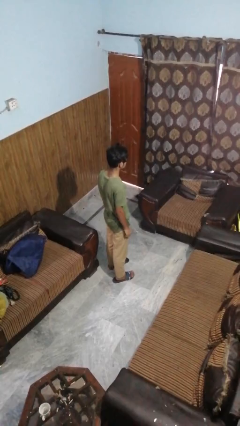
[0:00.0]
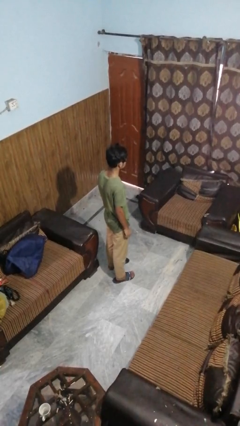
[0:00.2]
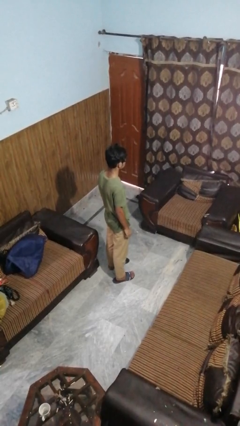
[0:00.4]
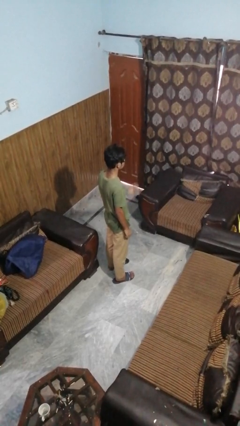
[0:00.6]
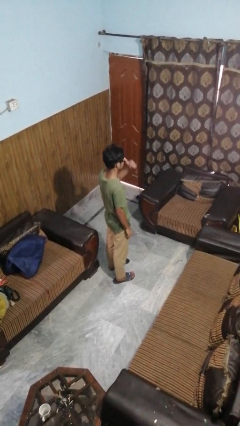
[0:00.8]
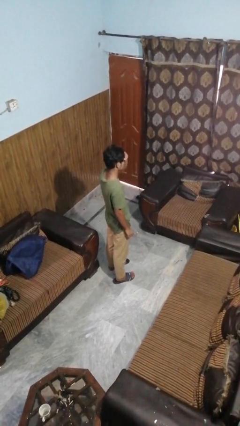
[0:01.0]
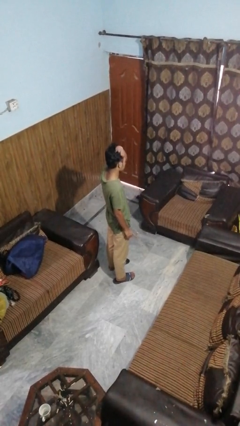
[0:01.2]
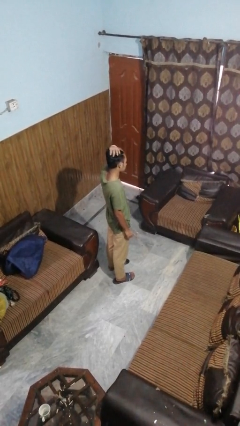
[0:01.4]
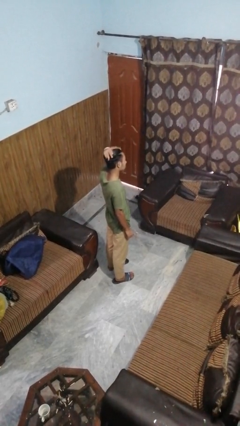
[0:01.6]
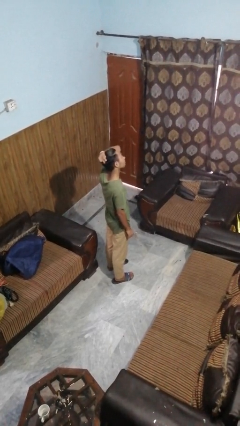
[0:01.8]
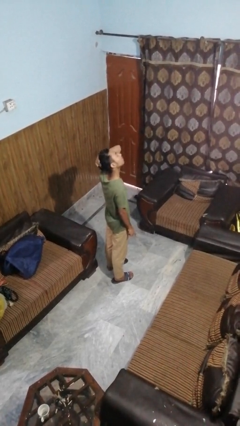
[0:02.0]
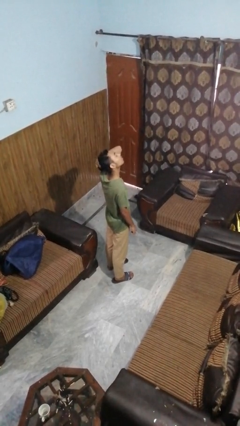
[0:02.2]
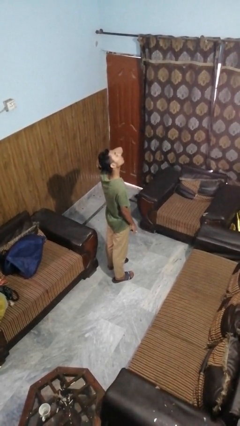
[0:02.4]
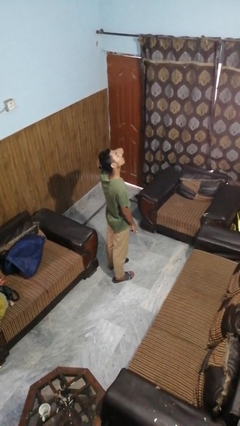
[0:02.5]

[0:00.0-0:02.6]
person strokes hair

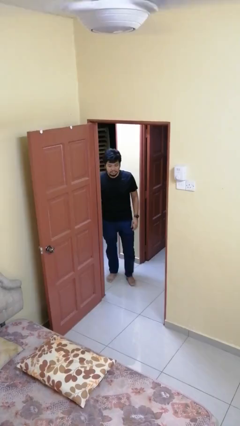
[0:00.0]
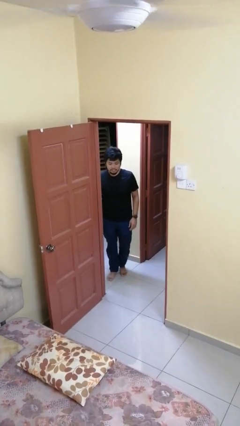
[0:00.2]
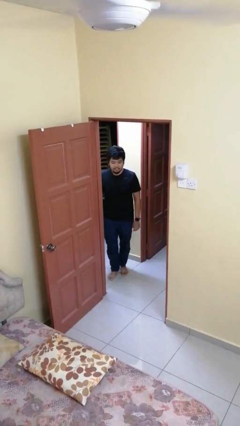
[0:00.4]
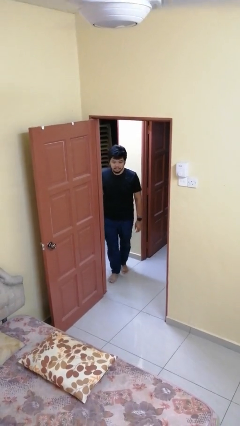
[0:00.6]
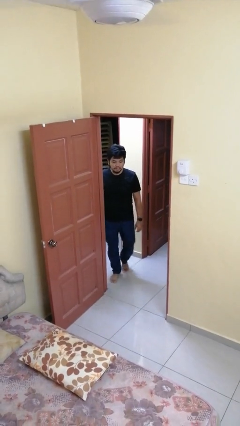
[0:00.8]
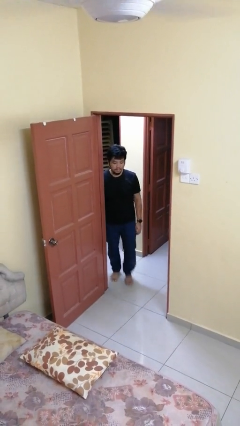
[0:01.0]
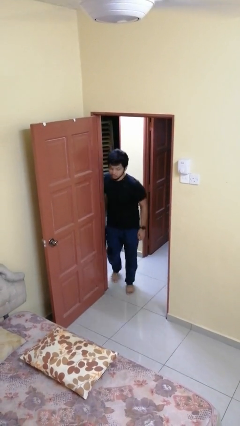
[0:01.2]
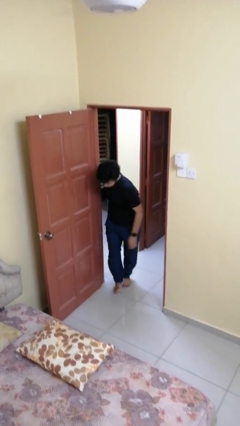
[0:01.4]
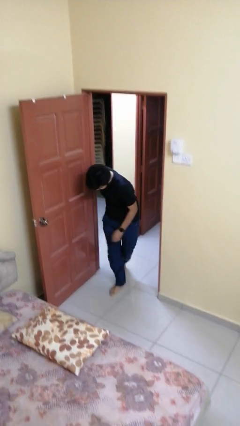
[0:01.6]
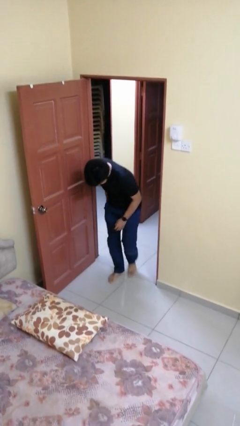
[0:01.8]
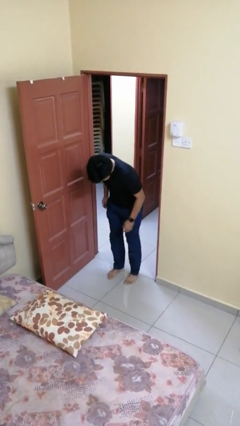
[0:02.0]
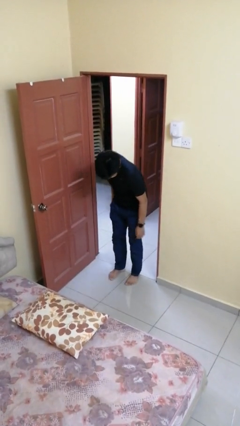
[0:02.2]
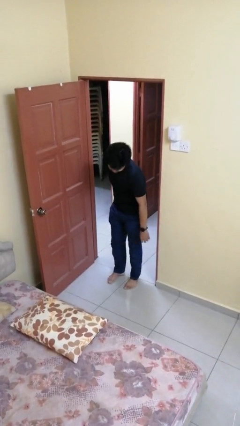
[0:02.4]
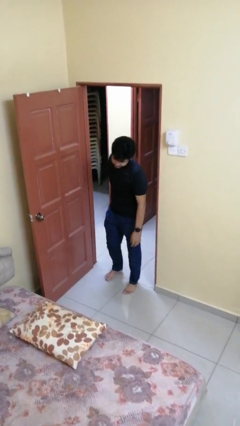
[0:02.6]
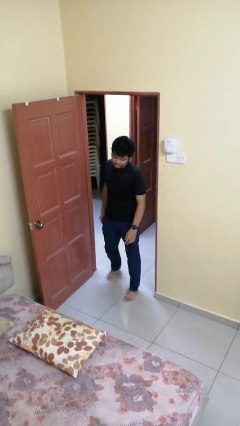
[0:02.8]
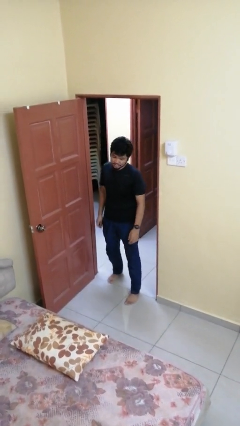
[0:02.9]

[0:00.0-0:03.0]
person bumps into wall

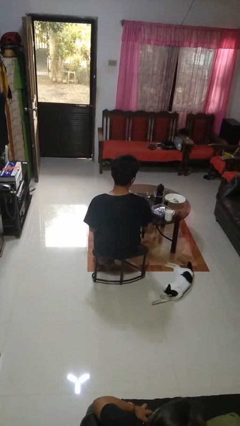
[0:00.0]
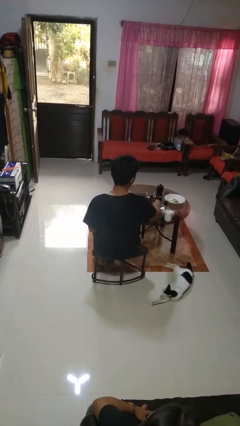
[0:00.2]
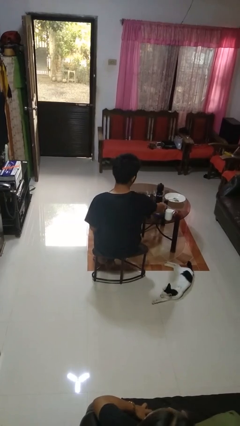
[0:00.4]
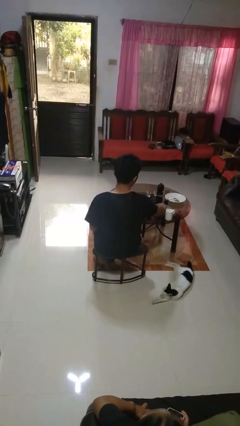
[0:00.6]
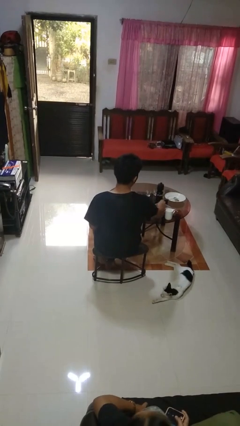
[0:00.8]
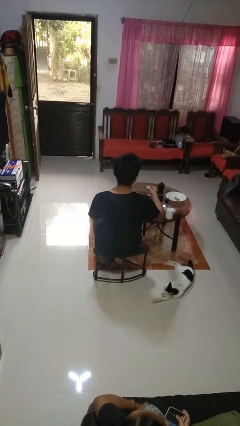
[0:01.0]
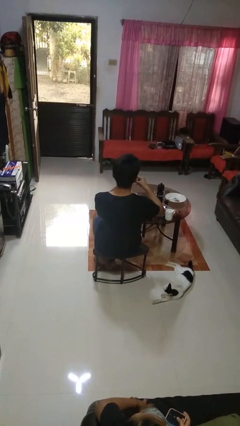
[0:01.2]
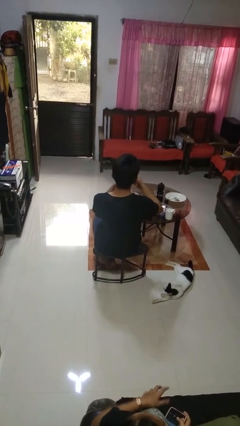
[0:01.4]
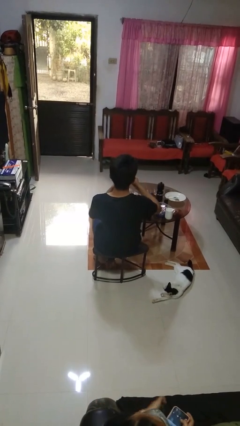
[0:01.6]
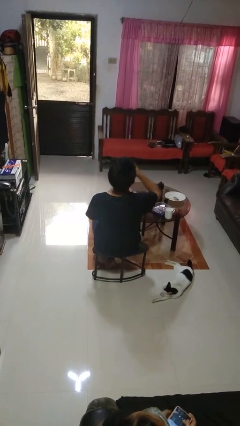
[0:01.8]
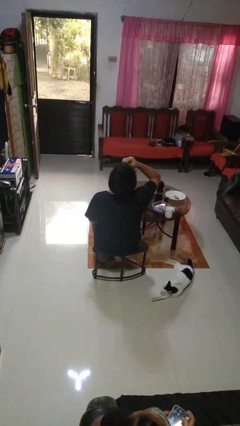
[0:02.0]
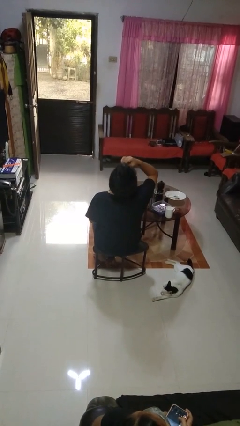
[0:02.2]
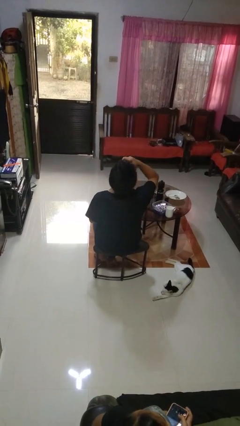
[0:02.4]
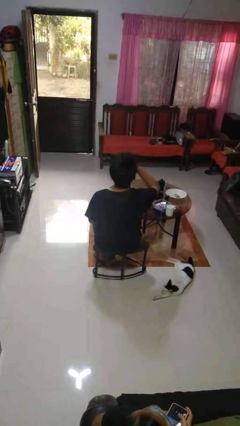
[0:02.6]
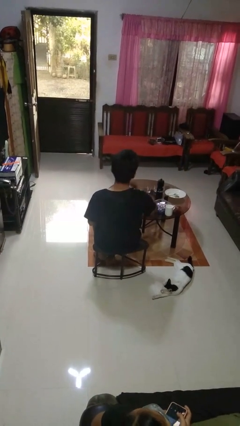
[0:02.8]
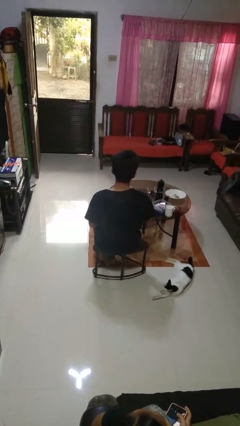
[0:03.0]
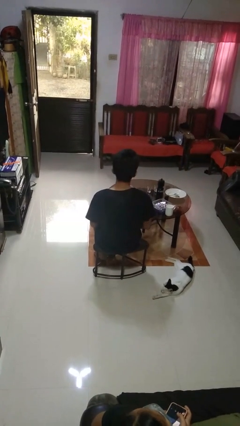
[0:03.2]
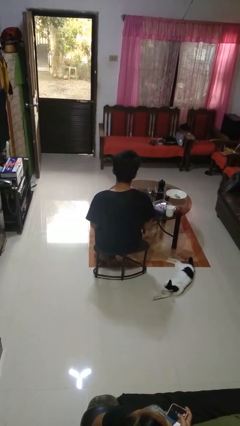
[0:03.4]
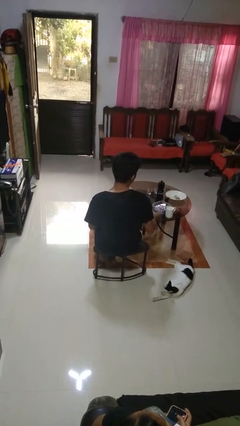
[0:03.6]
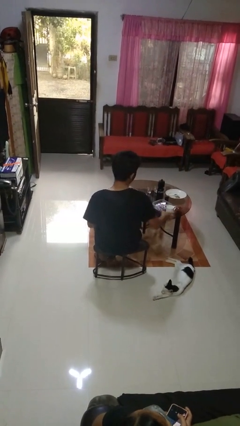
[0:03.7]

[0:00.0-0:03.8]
person takes medicine pills

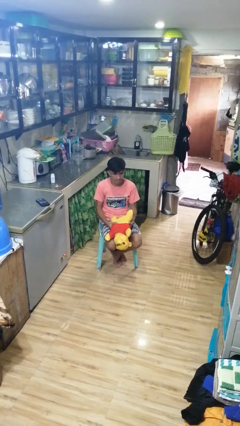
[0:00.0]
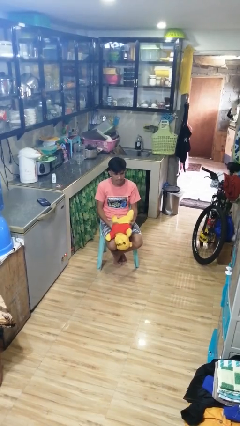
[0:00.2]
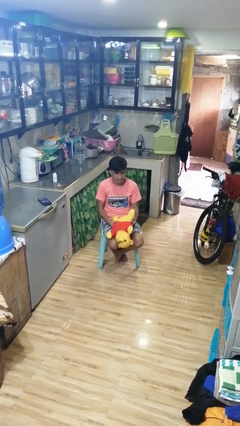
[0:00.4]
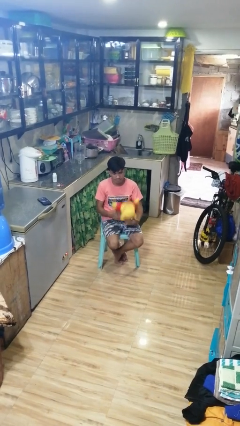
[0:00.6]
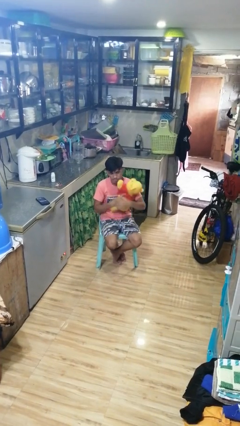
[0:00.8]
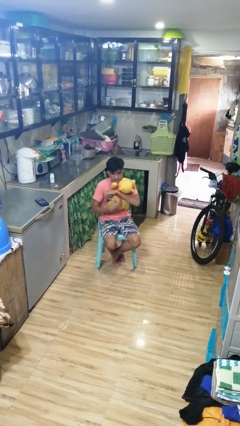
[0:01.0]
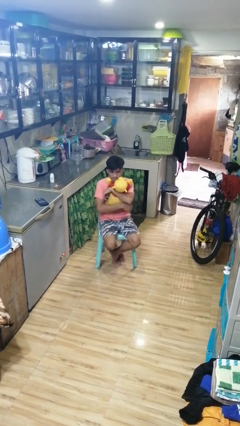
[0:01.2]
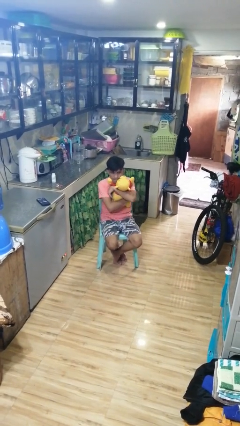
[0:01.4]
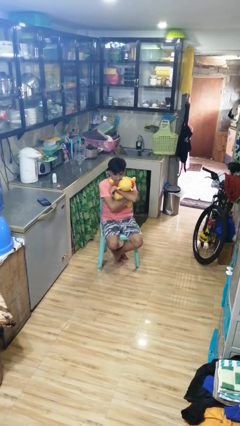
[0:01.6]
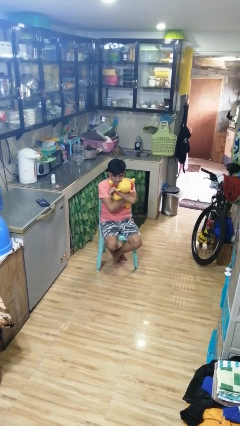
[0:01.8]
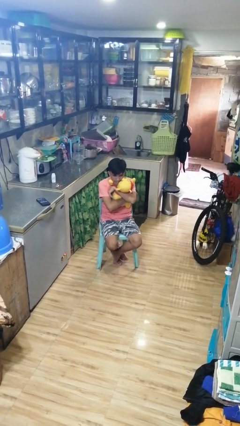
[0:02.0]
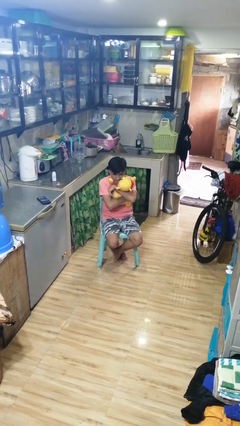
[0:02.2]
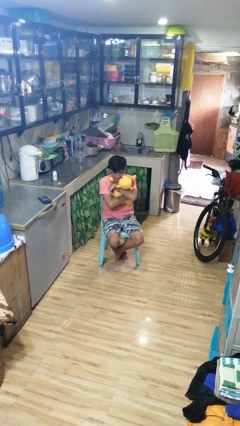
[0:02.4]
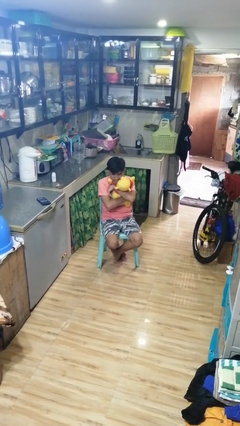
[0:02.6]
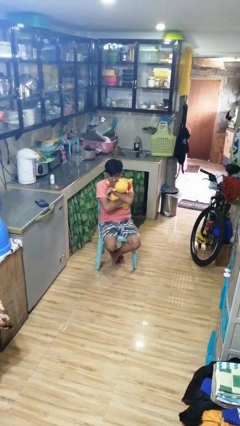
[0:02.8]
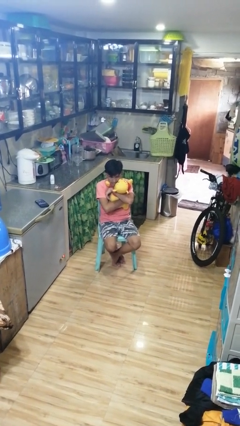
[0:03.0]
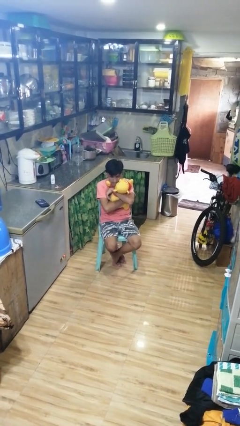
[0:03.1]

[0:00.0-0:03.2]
person hugs stuffed animal

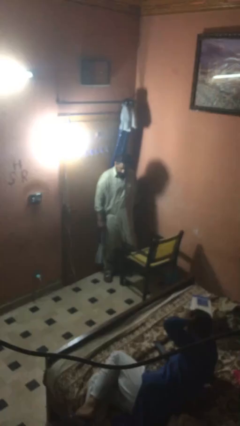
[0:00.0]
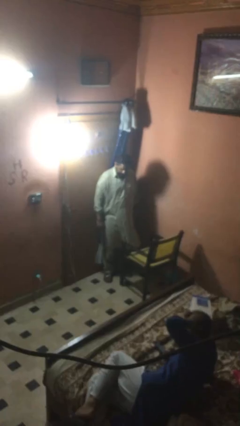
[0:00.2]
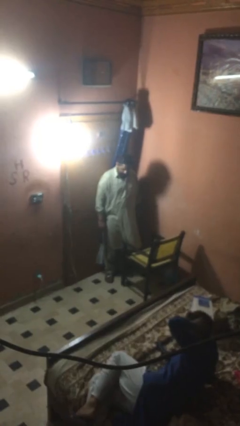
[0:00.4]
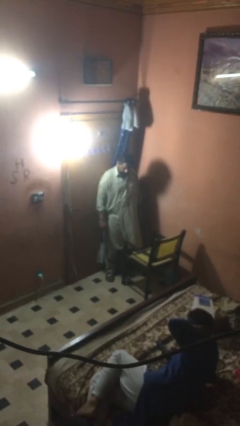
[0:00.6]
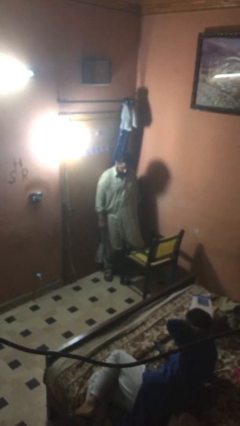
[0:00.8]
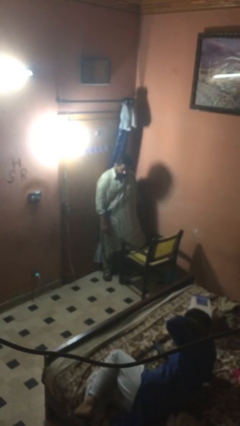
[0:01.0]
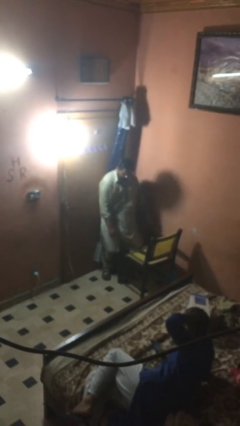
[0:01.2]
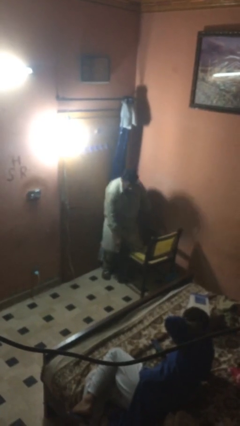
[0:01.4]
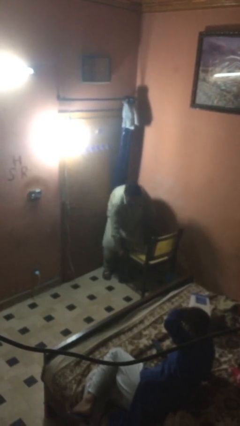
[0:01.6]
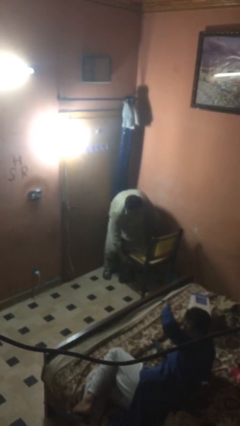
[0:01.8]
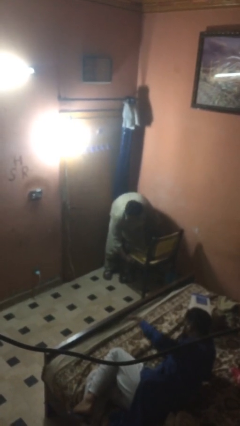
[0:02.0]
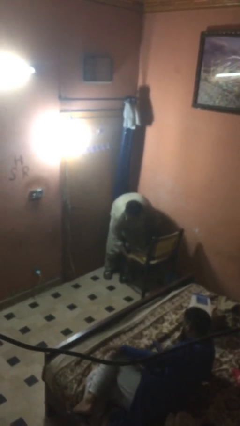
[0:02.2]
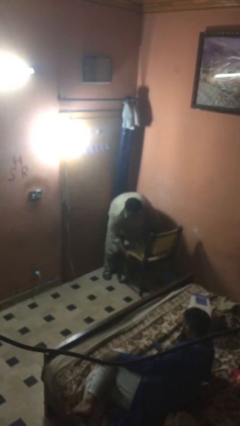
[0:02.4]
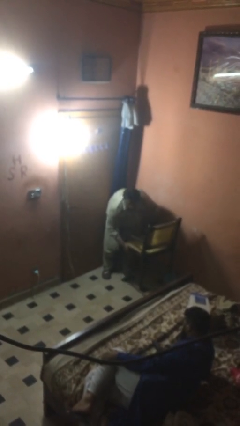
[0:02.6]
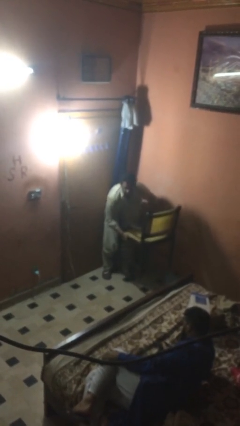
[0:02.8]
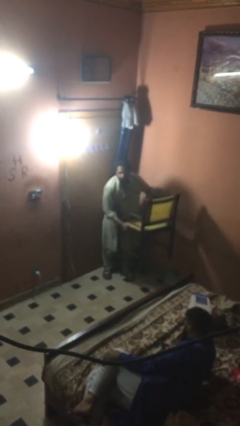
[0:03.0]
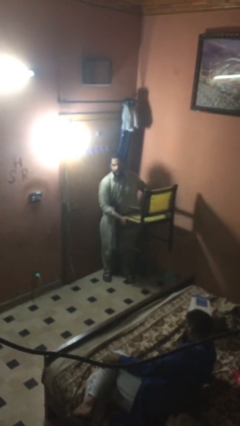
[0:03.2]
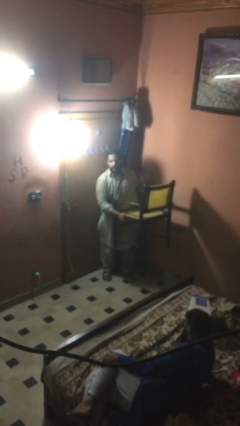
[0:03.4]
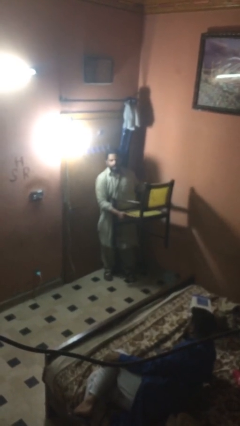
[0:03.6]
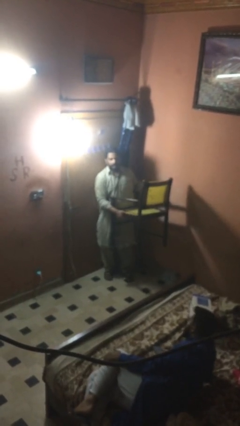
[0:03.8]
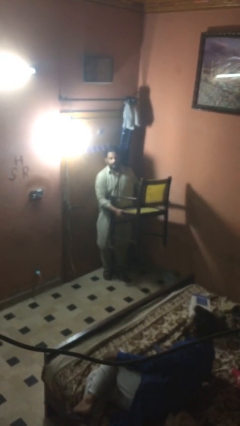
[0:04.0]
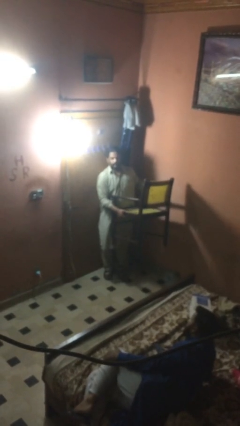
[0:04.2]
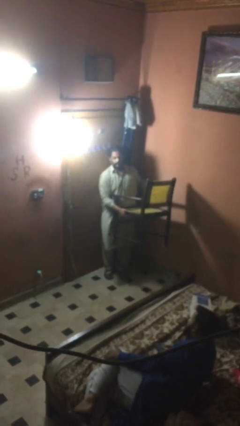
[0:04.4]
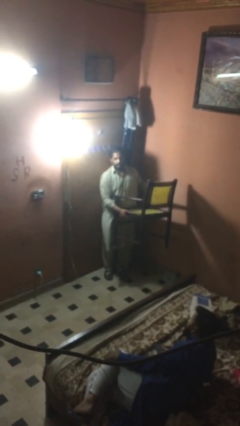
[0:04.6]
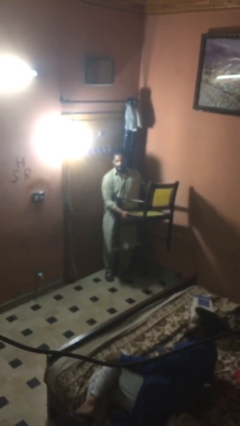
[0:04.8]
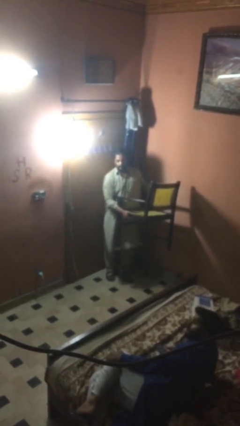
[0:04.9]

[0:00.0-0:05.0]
person picks up object from floor

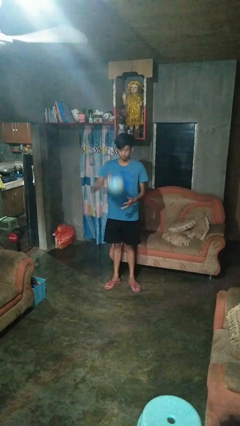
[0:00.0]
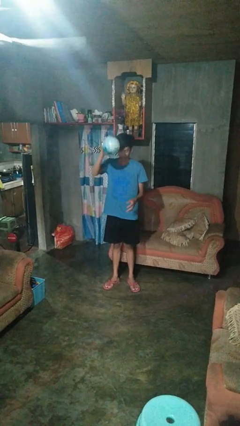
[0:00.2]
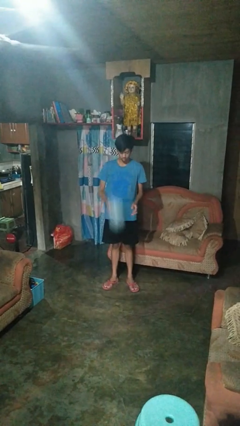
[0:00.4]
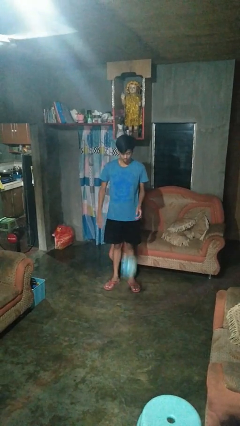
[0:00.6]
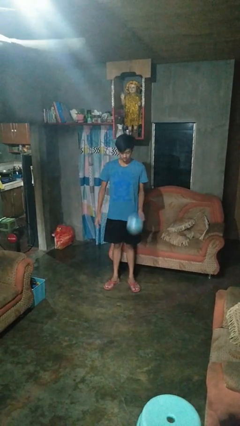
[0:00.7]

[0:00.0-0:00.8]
person bounces ball on floor
